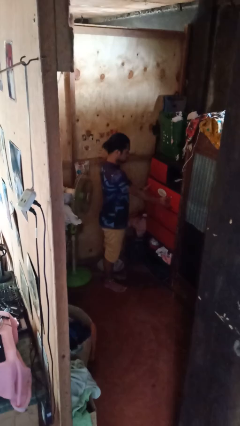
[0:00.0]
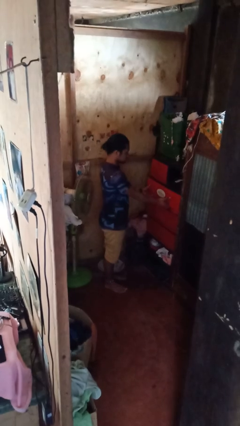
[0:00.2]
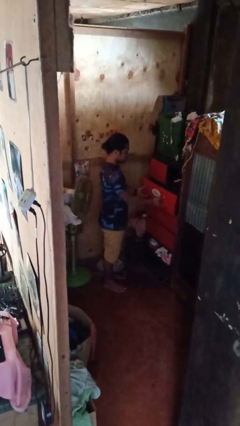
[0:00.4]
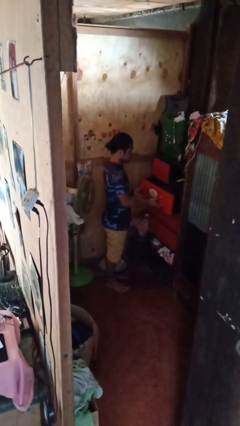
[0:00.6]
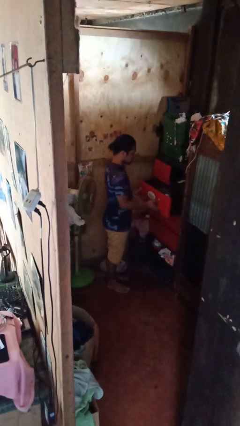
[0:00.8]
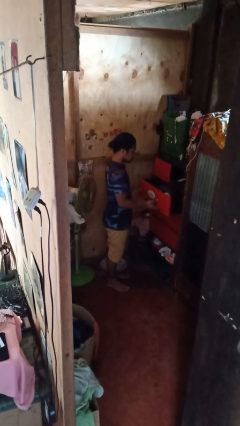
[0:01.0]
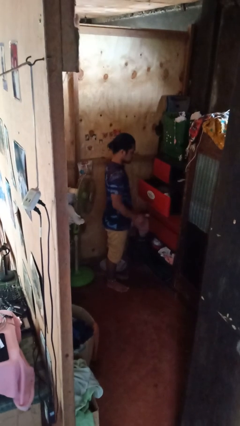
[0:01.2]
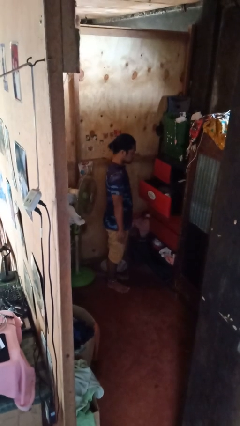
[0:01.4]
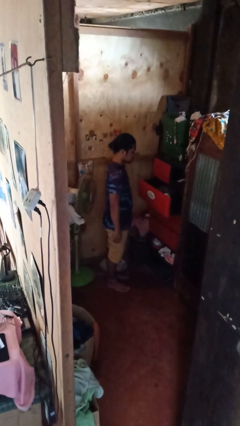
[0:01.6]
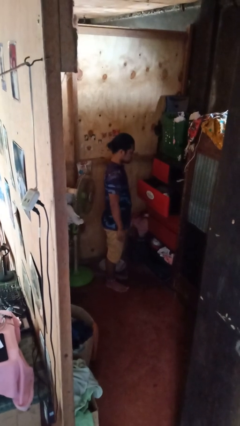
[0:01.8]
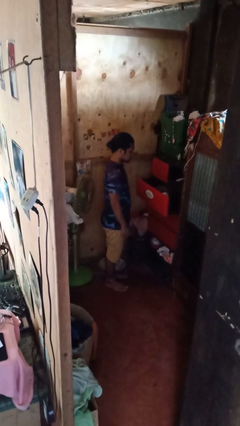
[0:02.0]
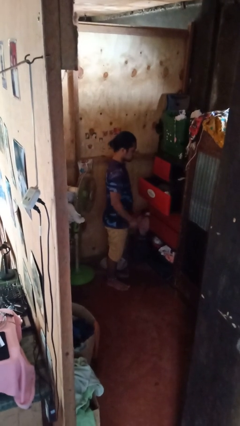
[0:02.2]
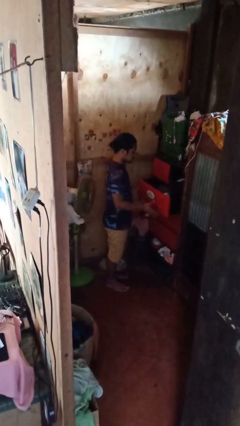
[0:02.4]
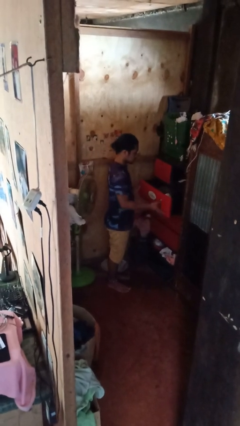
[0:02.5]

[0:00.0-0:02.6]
person opens dresser drawer

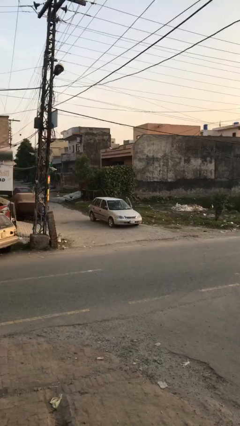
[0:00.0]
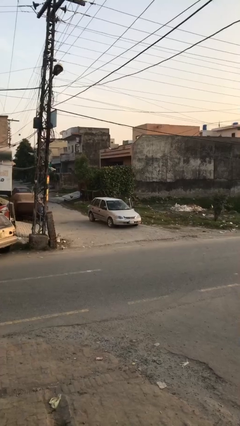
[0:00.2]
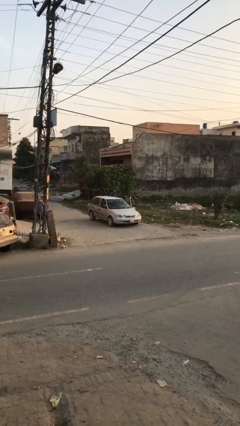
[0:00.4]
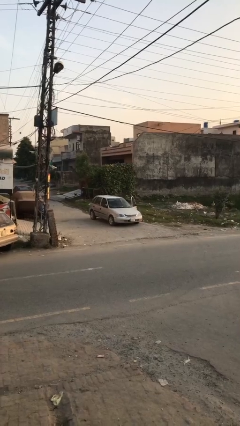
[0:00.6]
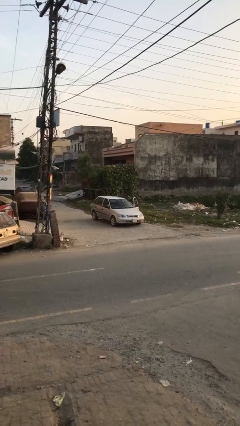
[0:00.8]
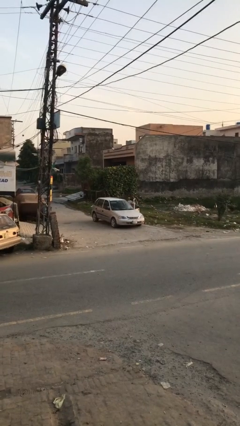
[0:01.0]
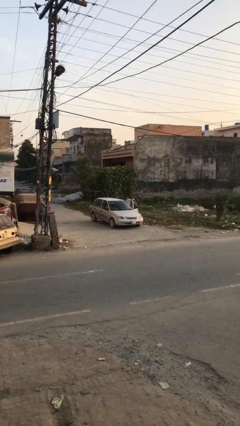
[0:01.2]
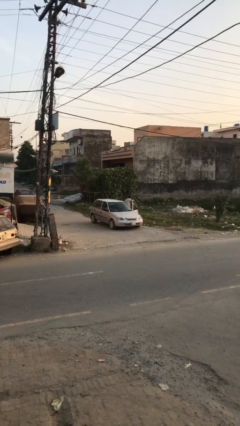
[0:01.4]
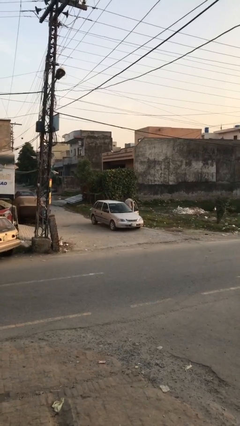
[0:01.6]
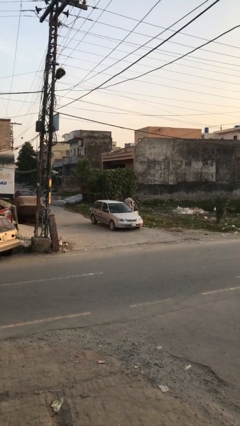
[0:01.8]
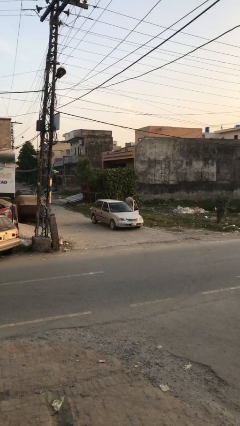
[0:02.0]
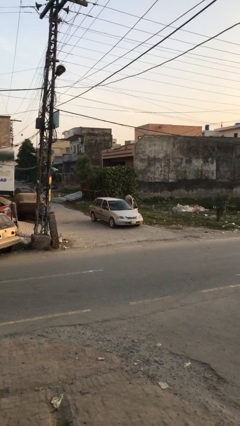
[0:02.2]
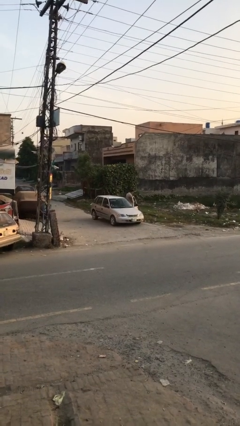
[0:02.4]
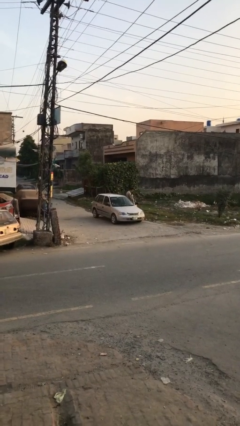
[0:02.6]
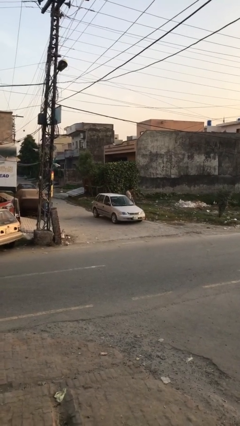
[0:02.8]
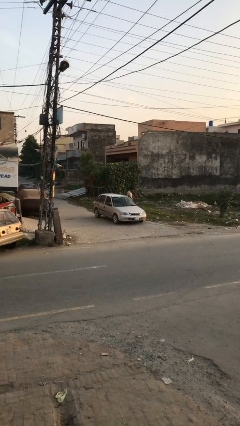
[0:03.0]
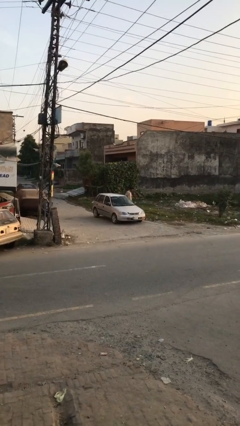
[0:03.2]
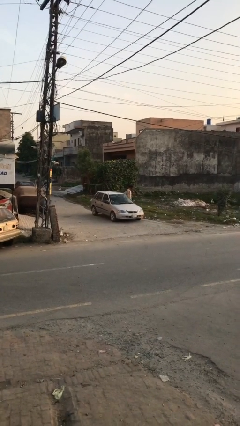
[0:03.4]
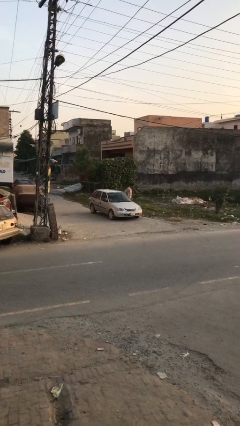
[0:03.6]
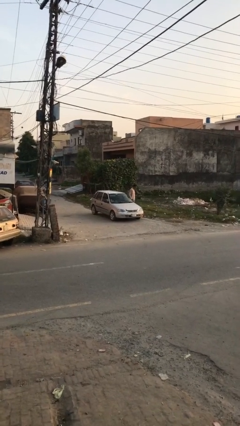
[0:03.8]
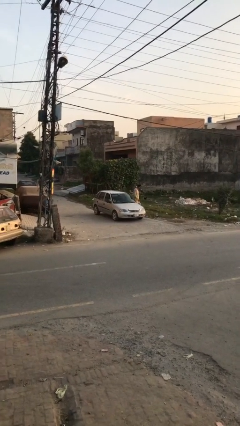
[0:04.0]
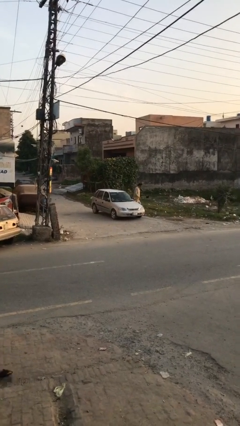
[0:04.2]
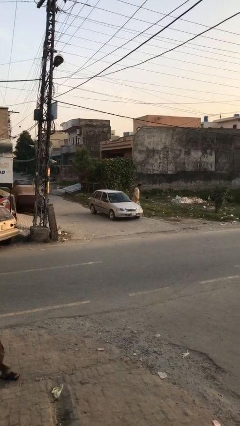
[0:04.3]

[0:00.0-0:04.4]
car drops off person

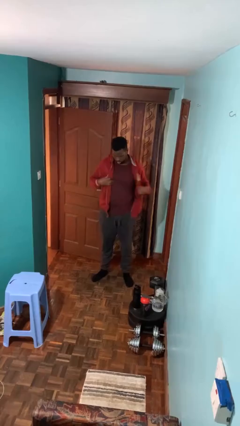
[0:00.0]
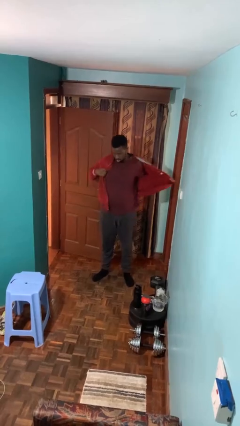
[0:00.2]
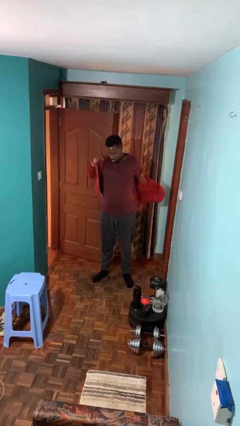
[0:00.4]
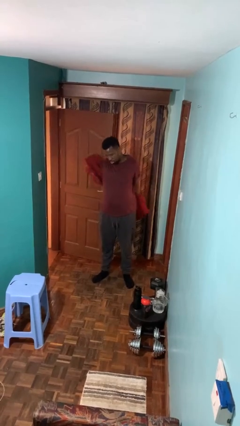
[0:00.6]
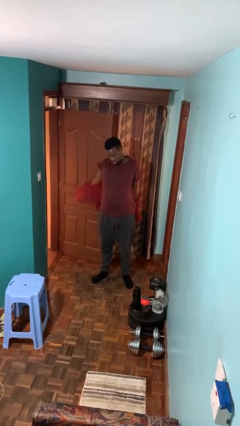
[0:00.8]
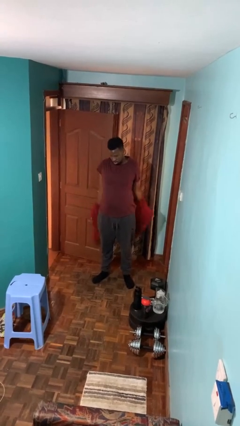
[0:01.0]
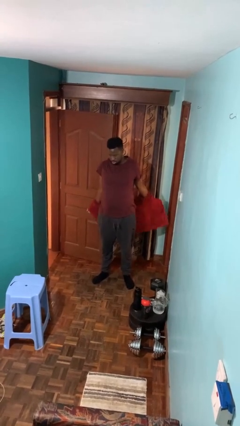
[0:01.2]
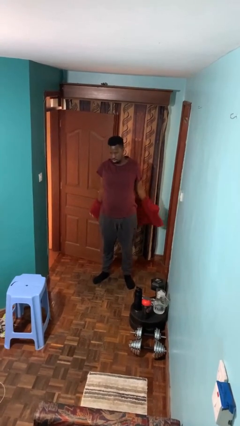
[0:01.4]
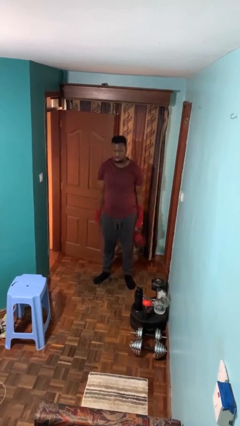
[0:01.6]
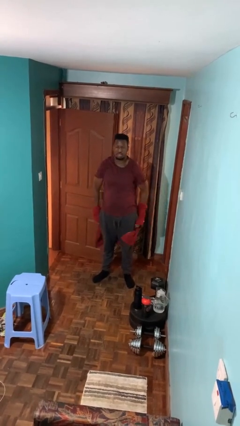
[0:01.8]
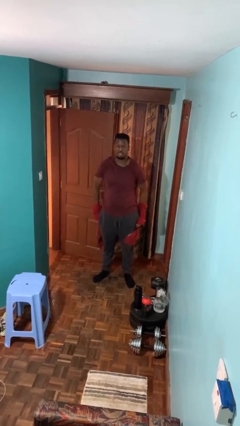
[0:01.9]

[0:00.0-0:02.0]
person takes off jacket

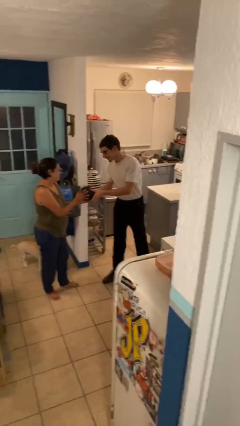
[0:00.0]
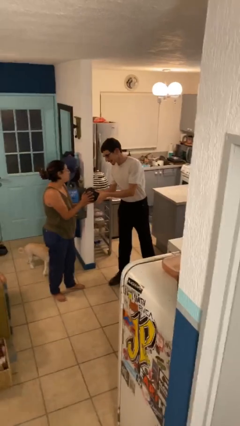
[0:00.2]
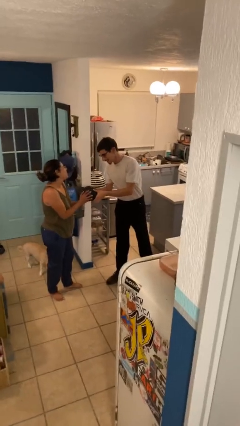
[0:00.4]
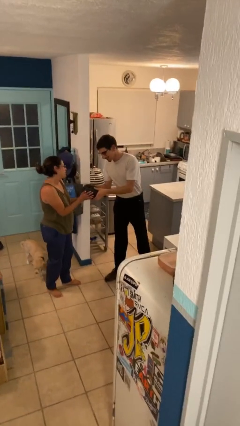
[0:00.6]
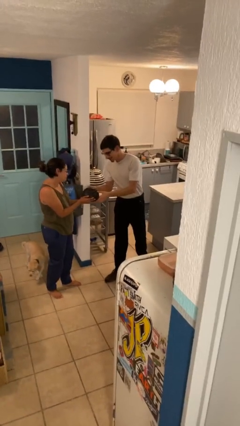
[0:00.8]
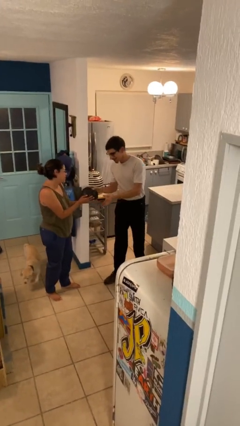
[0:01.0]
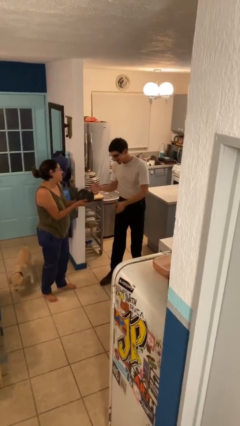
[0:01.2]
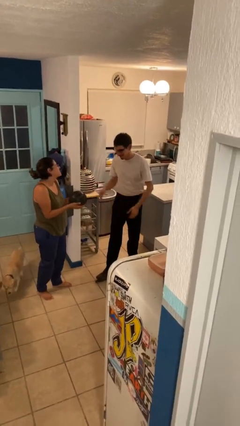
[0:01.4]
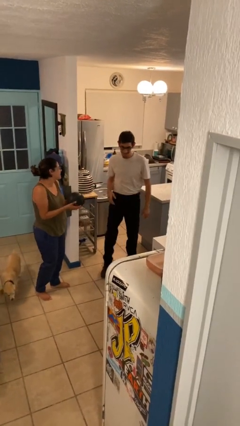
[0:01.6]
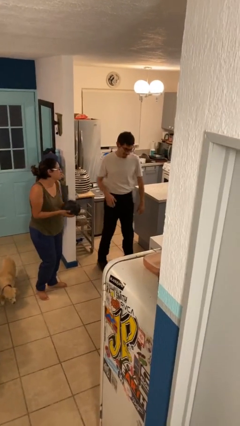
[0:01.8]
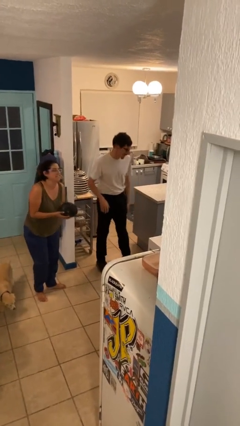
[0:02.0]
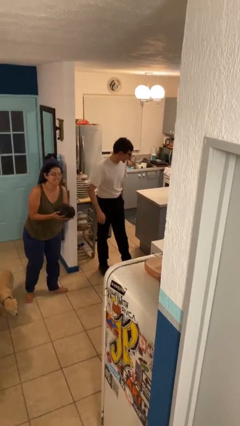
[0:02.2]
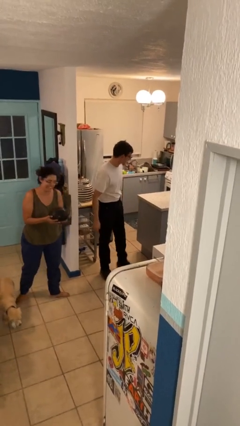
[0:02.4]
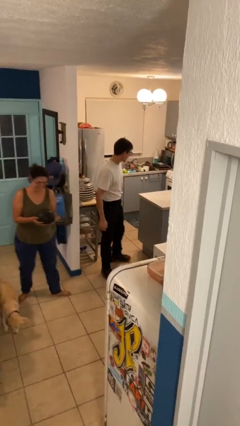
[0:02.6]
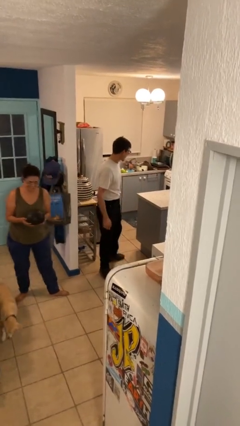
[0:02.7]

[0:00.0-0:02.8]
person transfers object to person

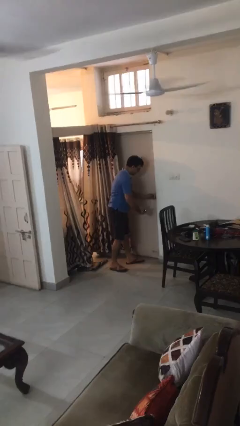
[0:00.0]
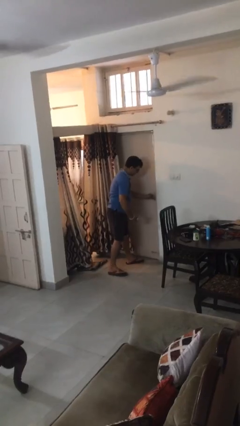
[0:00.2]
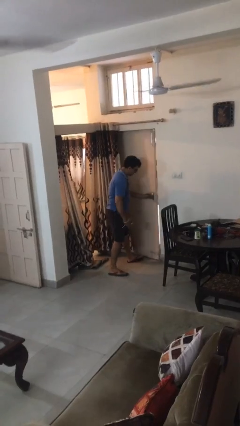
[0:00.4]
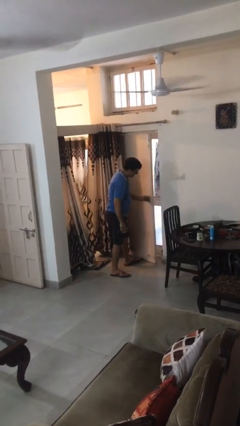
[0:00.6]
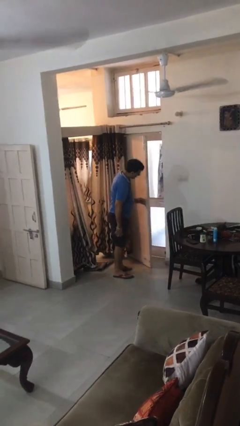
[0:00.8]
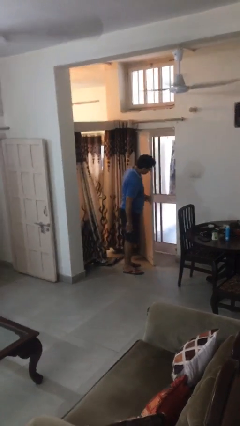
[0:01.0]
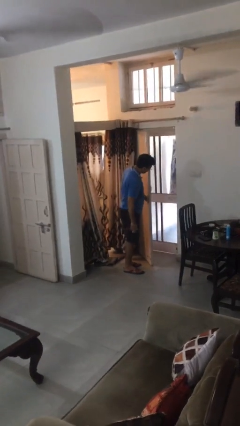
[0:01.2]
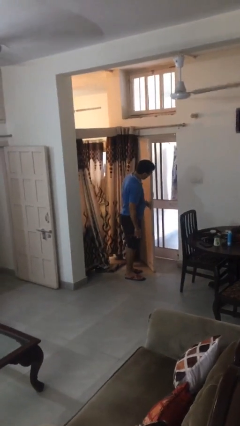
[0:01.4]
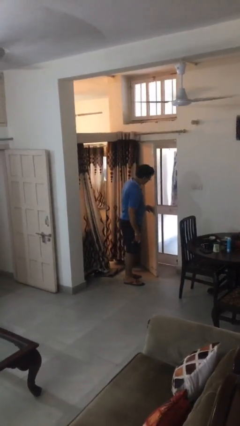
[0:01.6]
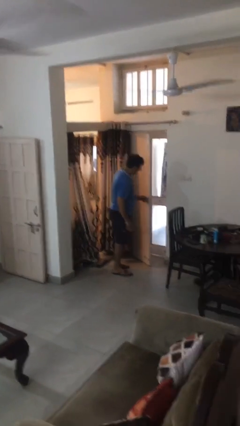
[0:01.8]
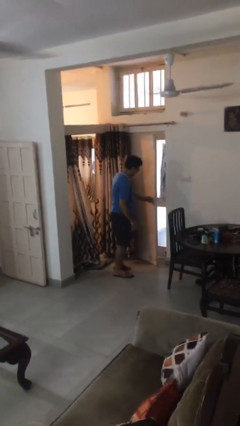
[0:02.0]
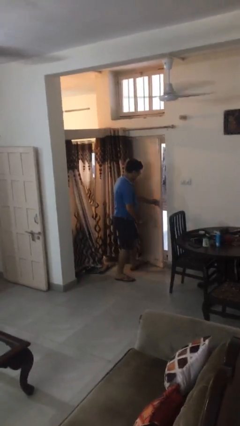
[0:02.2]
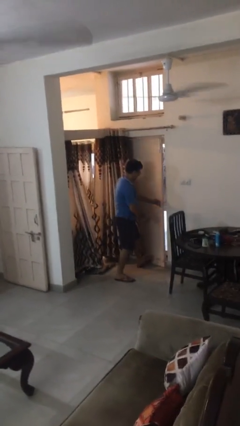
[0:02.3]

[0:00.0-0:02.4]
person opens facility door

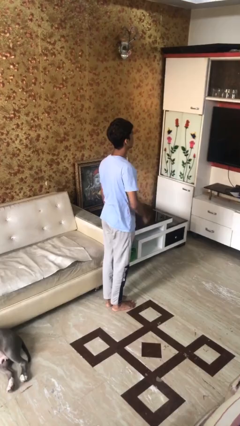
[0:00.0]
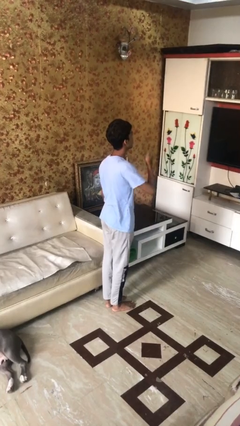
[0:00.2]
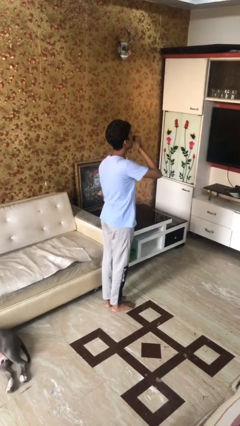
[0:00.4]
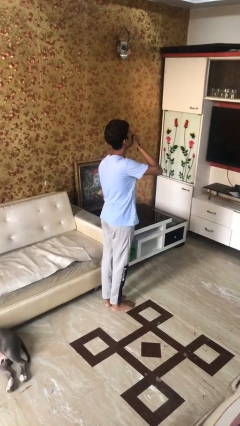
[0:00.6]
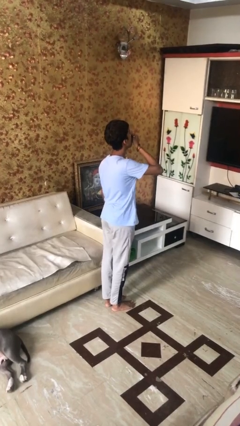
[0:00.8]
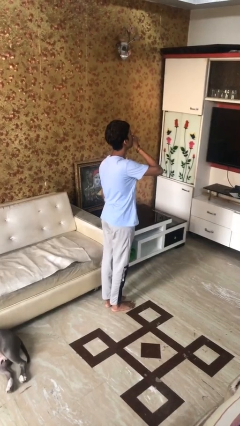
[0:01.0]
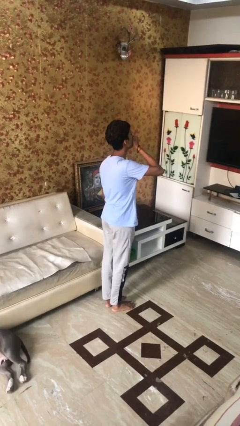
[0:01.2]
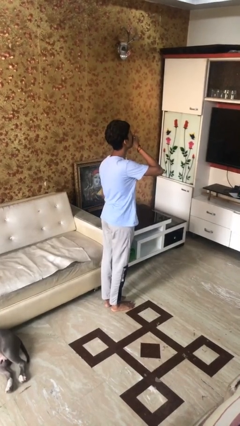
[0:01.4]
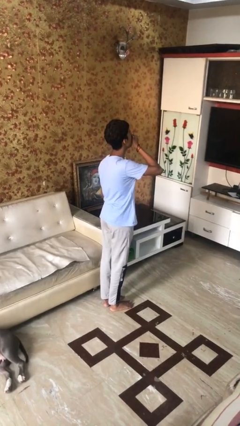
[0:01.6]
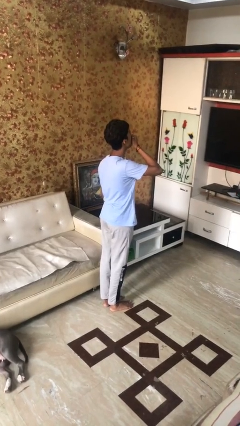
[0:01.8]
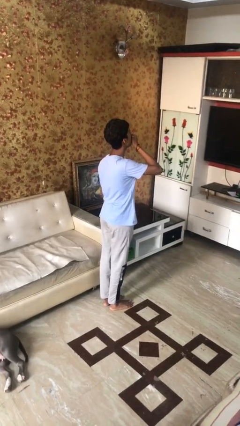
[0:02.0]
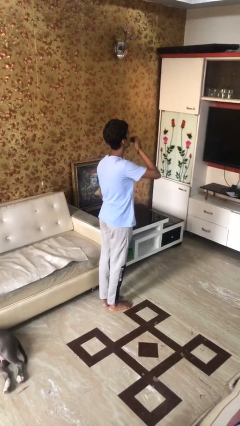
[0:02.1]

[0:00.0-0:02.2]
person yawns

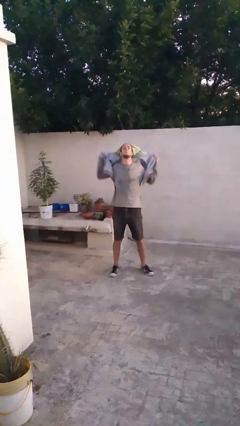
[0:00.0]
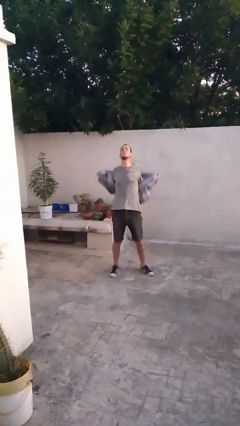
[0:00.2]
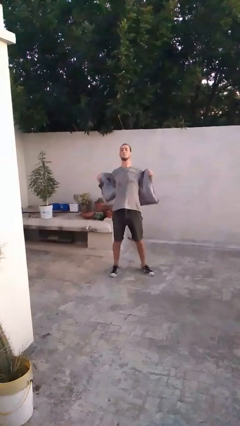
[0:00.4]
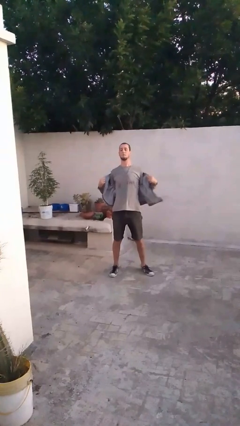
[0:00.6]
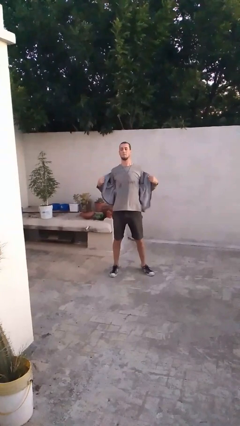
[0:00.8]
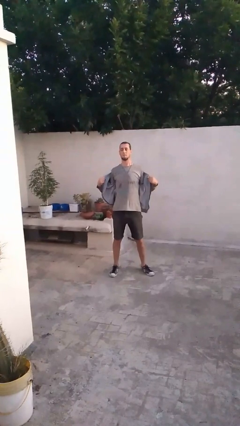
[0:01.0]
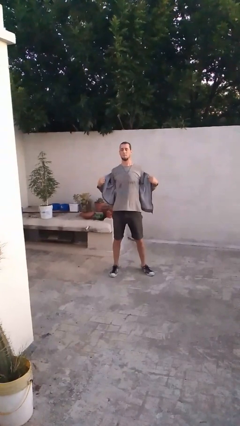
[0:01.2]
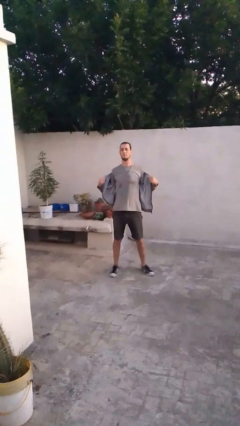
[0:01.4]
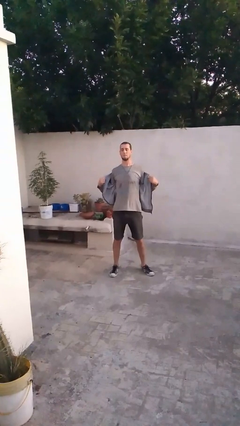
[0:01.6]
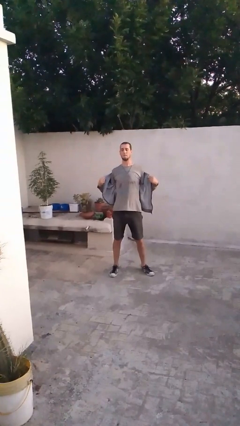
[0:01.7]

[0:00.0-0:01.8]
person takes off hoodie
